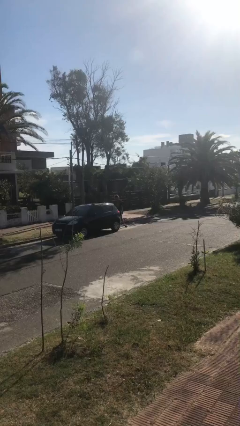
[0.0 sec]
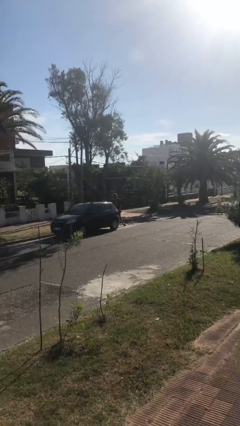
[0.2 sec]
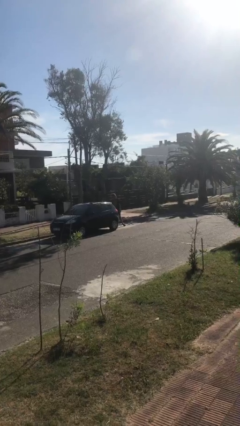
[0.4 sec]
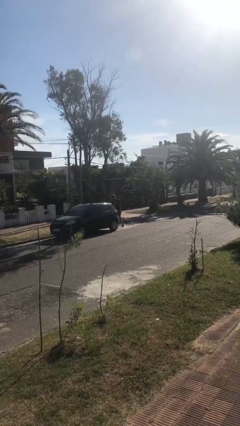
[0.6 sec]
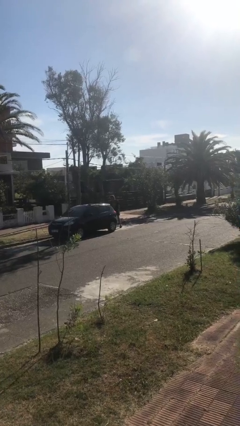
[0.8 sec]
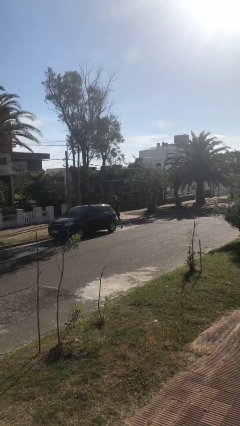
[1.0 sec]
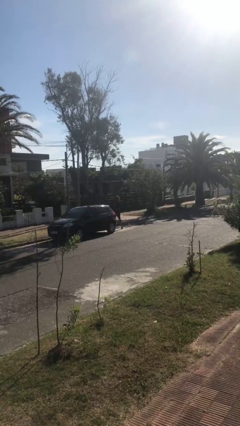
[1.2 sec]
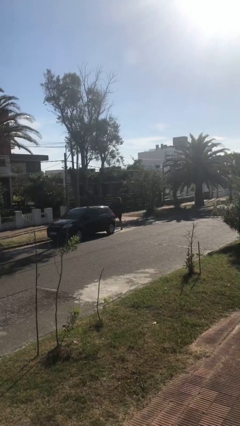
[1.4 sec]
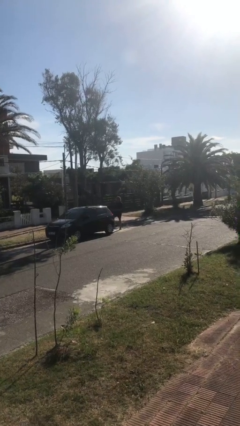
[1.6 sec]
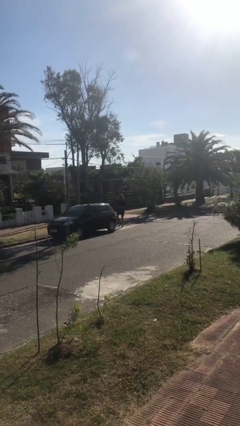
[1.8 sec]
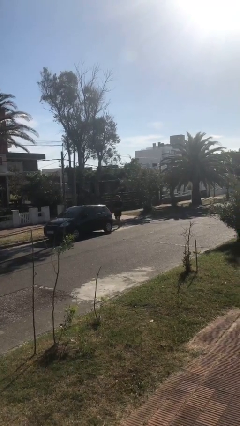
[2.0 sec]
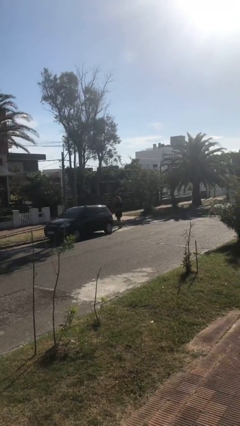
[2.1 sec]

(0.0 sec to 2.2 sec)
person unloads car

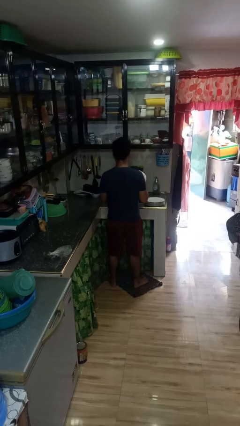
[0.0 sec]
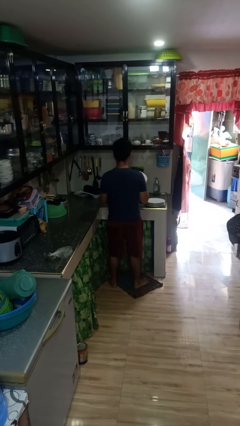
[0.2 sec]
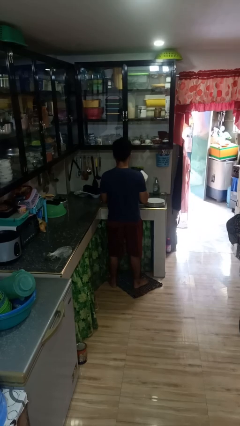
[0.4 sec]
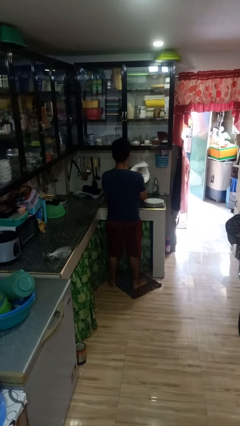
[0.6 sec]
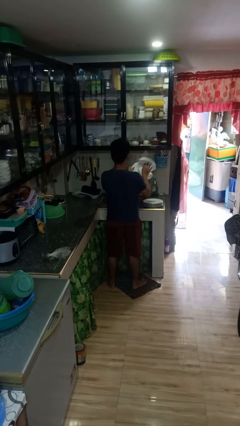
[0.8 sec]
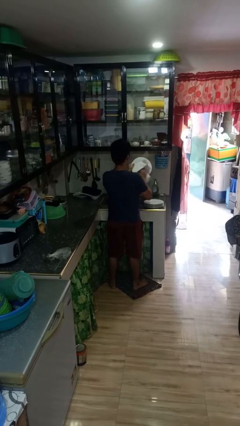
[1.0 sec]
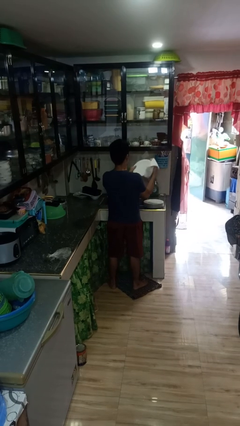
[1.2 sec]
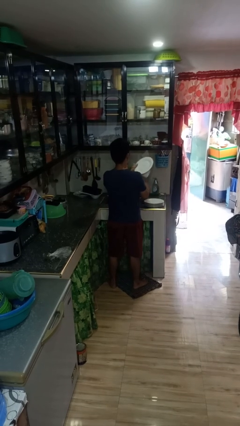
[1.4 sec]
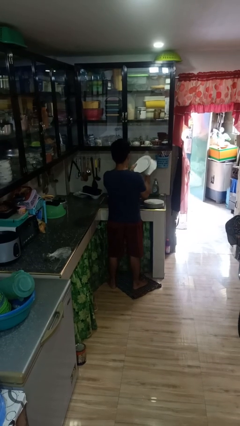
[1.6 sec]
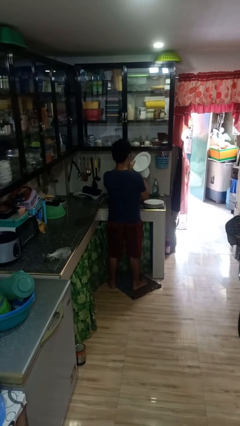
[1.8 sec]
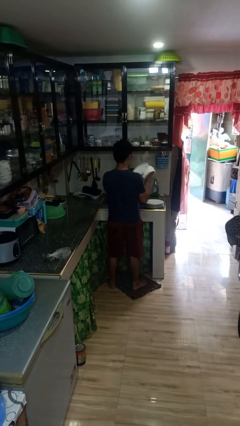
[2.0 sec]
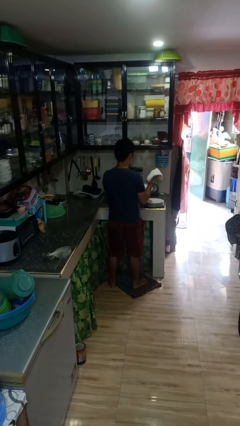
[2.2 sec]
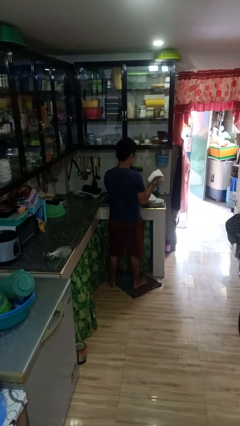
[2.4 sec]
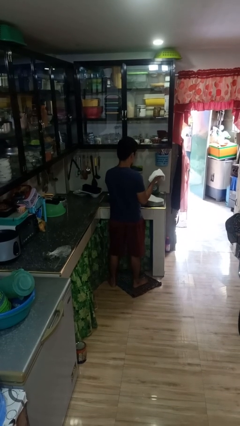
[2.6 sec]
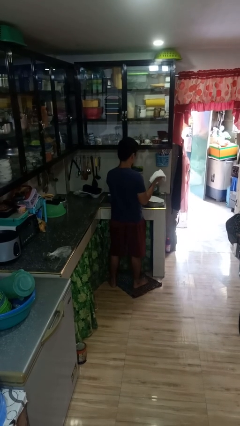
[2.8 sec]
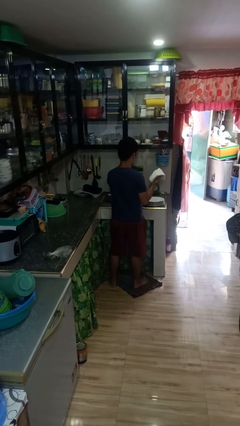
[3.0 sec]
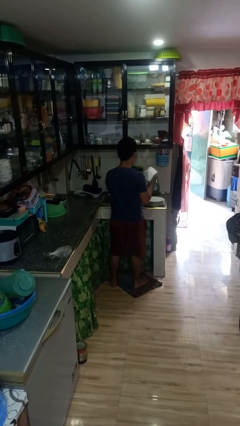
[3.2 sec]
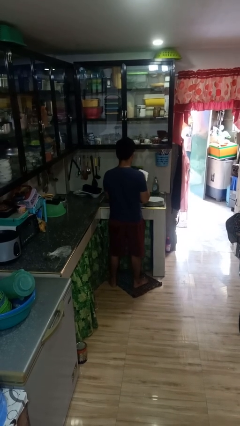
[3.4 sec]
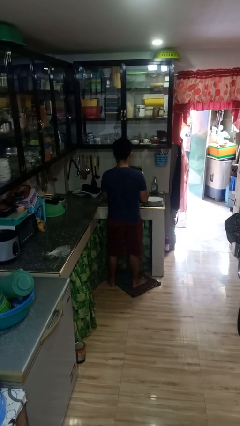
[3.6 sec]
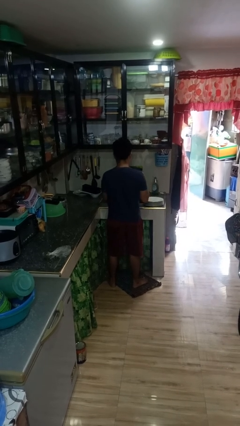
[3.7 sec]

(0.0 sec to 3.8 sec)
person dries dish

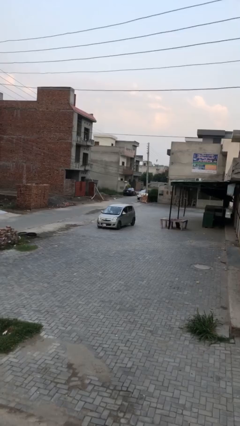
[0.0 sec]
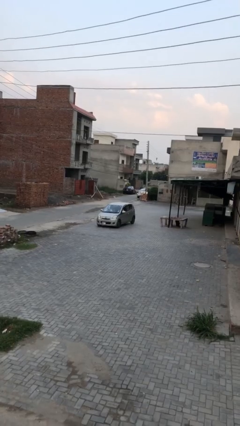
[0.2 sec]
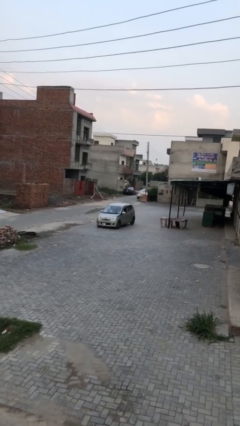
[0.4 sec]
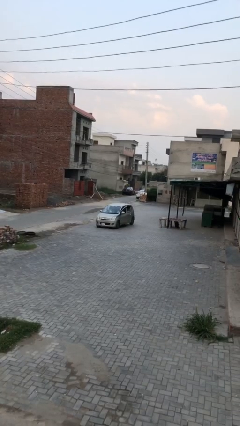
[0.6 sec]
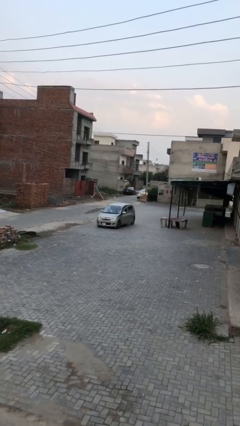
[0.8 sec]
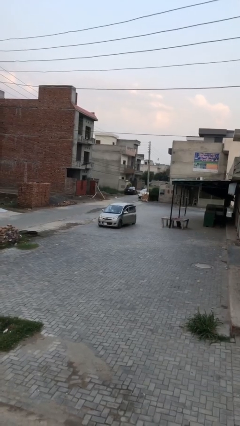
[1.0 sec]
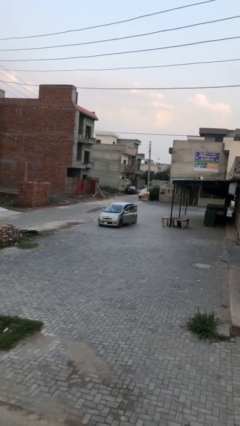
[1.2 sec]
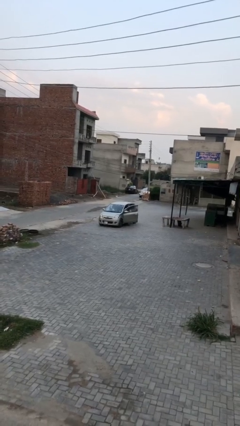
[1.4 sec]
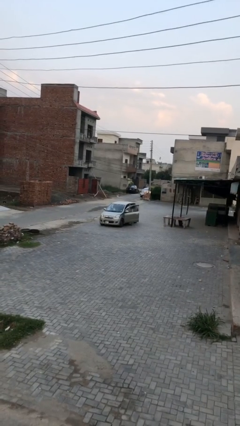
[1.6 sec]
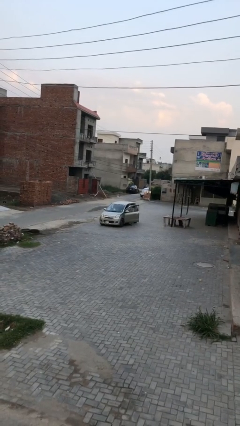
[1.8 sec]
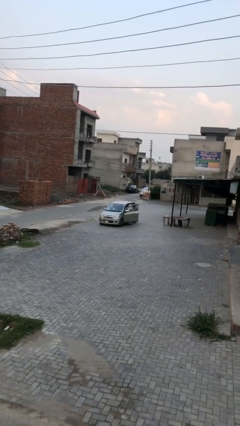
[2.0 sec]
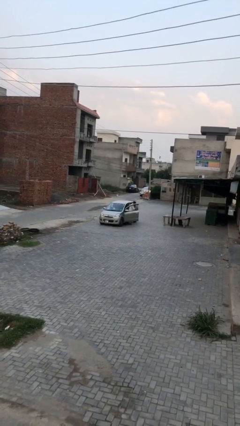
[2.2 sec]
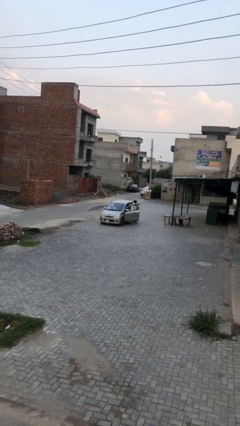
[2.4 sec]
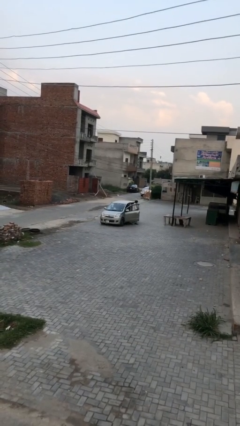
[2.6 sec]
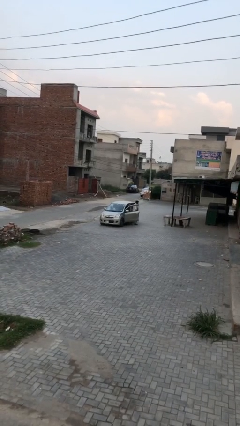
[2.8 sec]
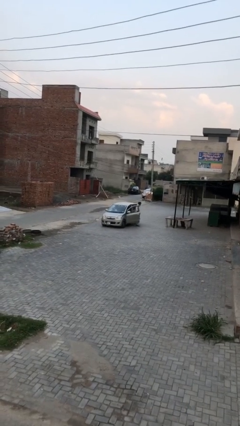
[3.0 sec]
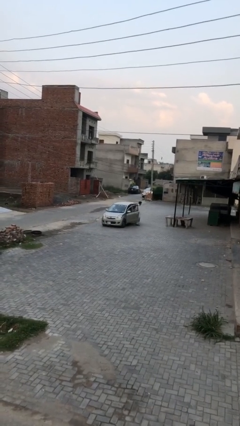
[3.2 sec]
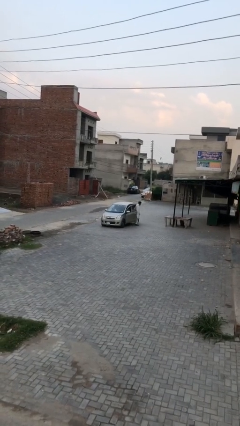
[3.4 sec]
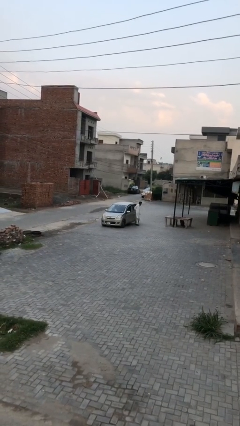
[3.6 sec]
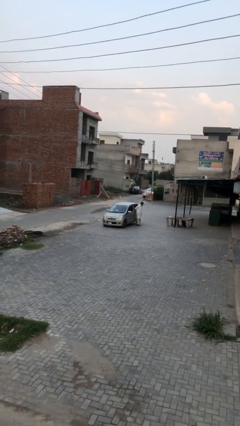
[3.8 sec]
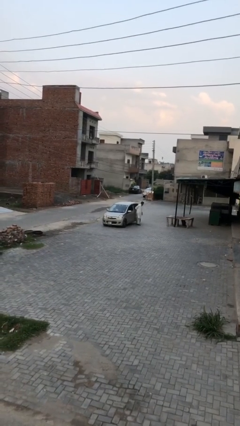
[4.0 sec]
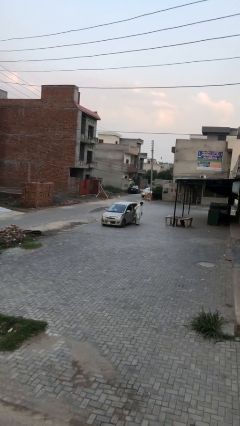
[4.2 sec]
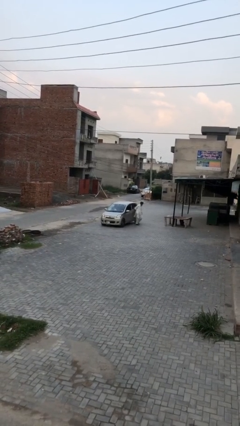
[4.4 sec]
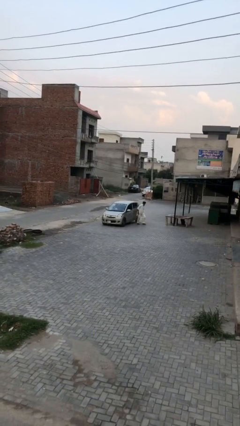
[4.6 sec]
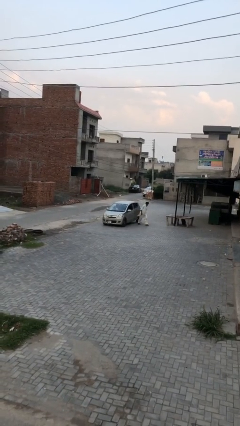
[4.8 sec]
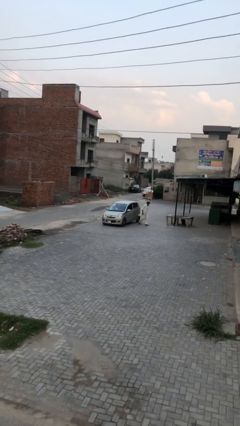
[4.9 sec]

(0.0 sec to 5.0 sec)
car drops off person

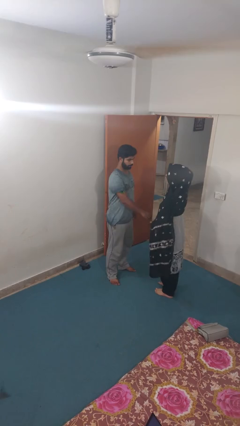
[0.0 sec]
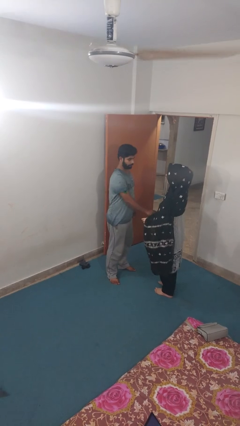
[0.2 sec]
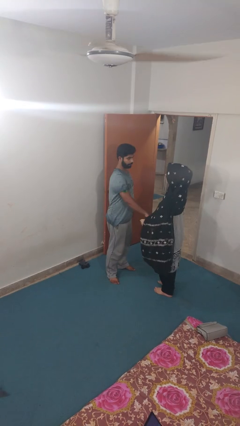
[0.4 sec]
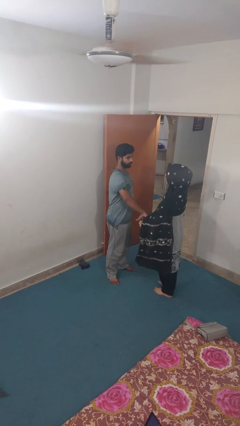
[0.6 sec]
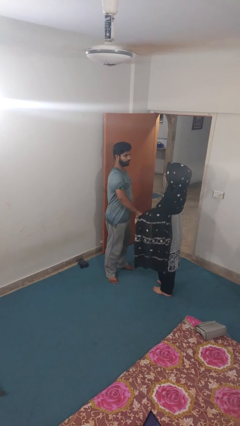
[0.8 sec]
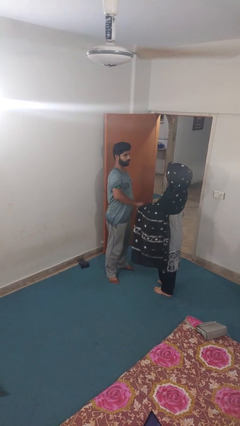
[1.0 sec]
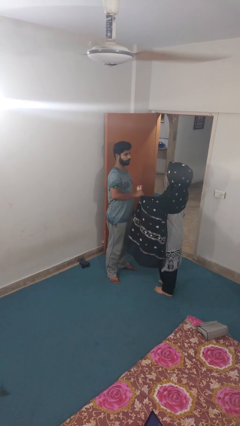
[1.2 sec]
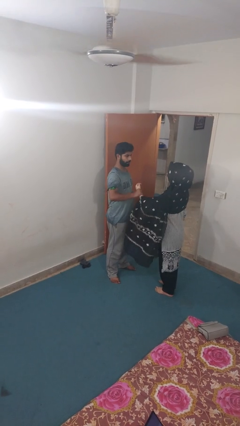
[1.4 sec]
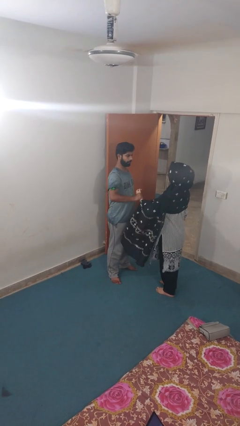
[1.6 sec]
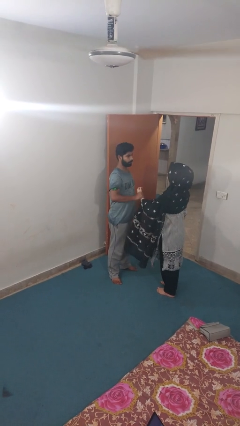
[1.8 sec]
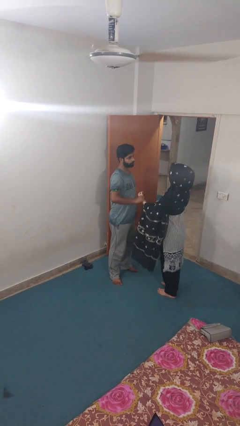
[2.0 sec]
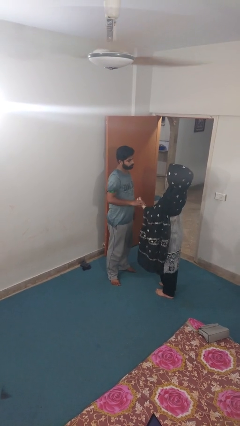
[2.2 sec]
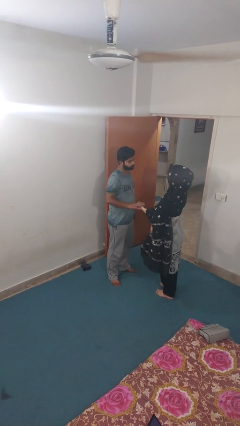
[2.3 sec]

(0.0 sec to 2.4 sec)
person grabs person by forearm

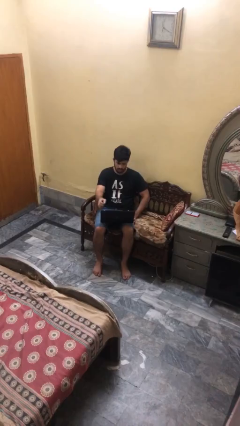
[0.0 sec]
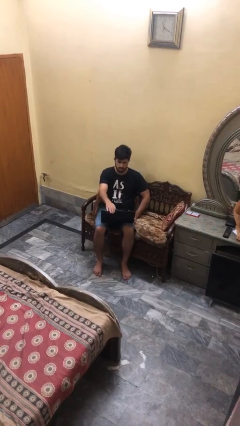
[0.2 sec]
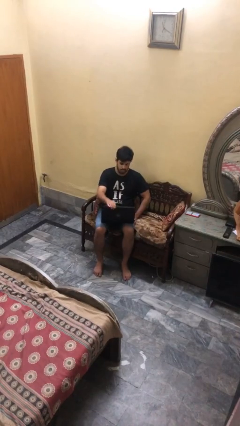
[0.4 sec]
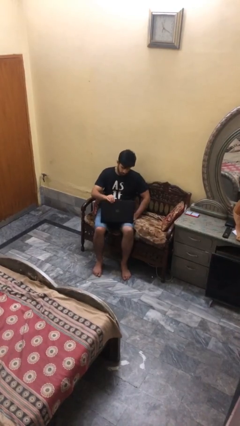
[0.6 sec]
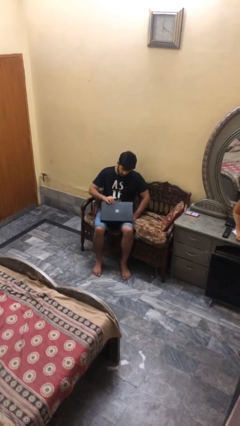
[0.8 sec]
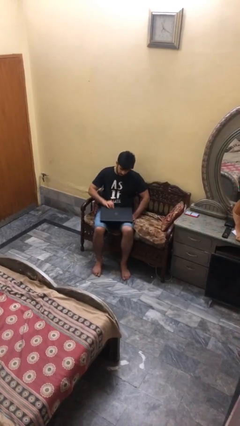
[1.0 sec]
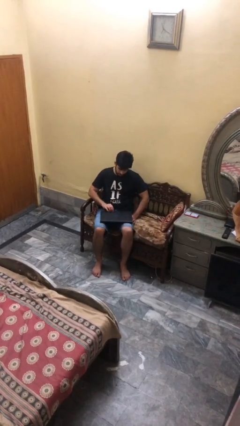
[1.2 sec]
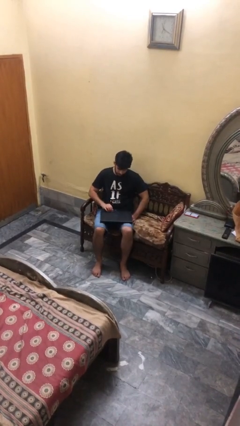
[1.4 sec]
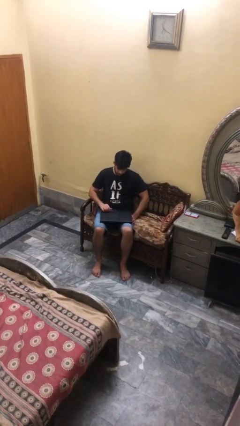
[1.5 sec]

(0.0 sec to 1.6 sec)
person closes laptop

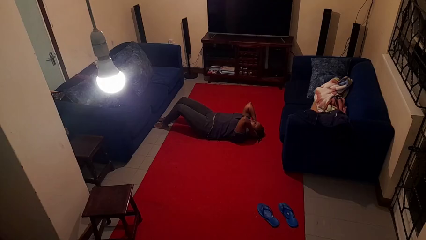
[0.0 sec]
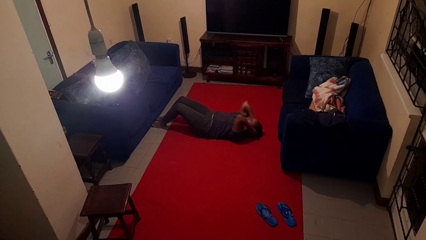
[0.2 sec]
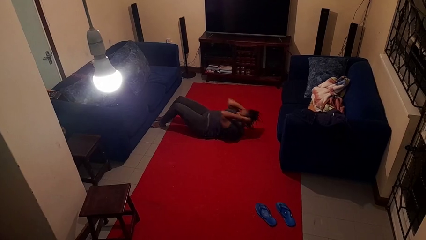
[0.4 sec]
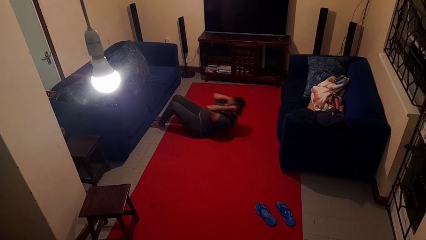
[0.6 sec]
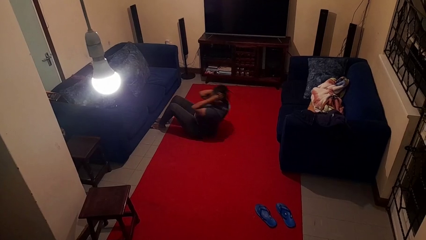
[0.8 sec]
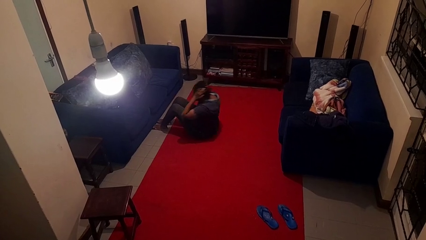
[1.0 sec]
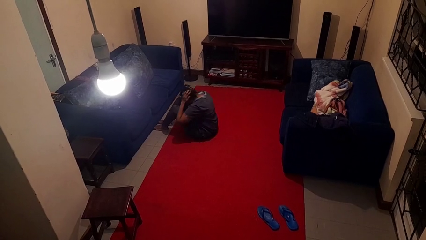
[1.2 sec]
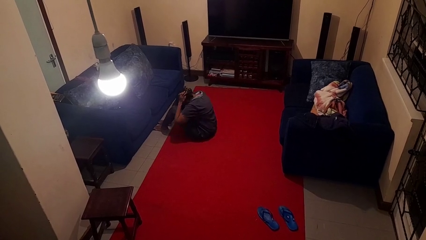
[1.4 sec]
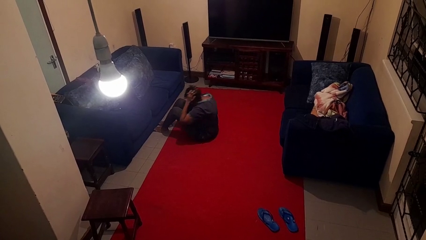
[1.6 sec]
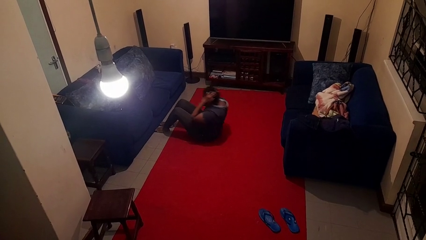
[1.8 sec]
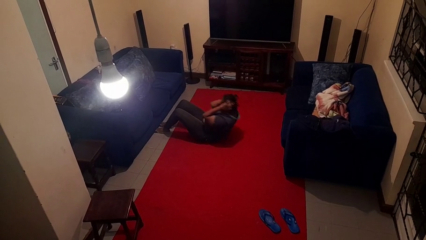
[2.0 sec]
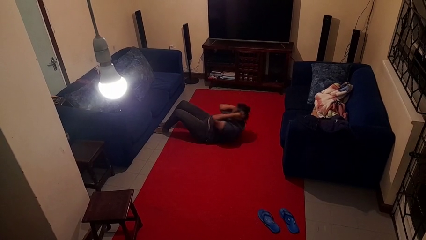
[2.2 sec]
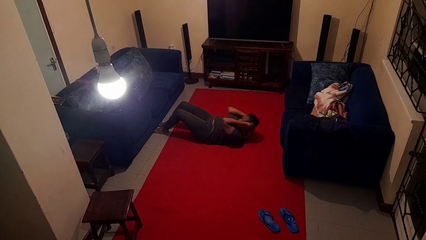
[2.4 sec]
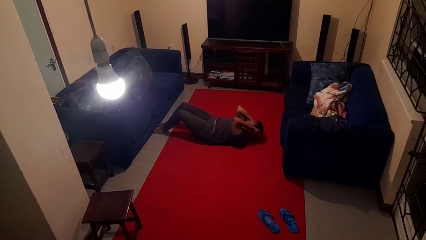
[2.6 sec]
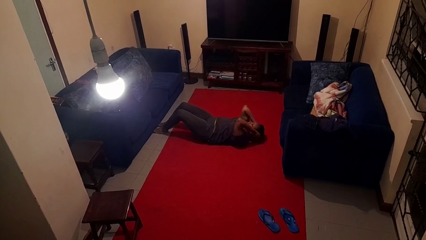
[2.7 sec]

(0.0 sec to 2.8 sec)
person exercises with situp
